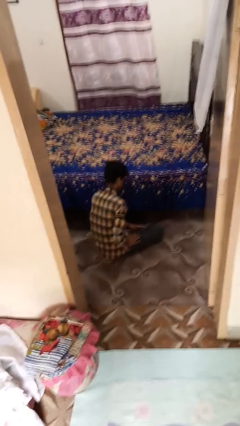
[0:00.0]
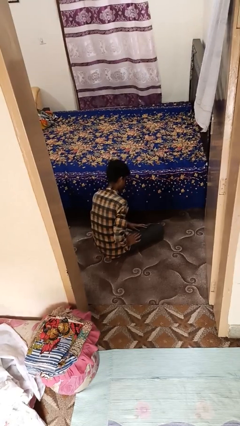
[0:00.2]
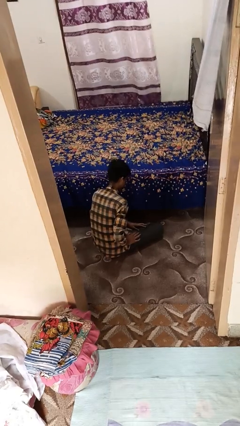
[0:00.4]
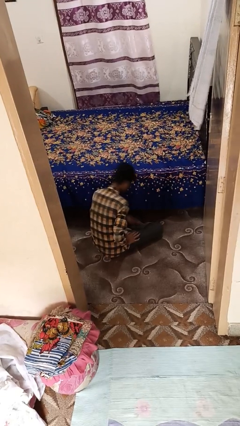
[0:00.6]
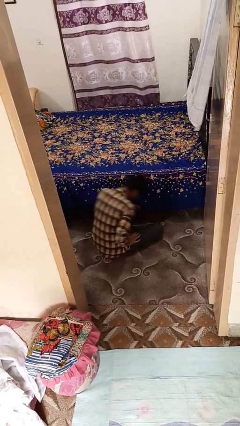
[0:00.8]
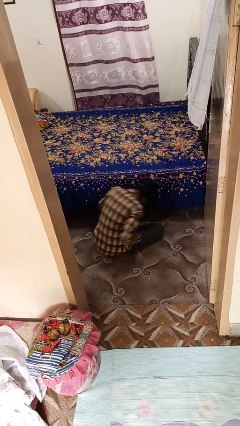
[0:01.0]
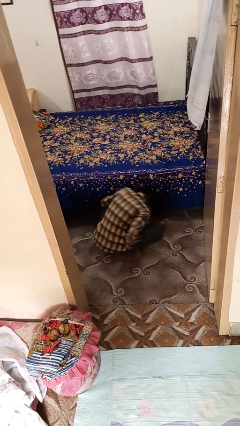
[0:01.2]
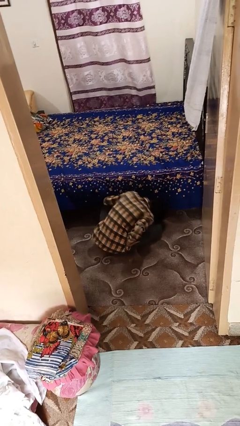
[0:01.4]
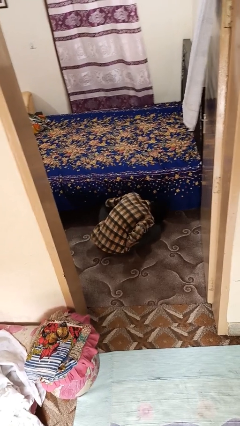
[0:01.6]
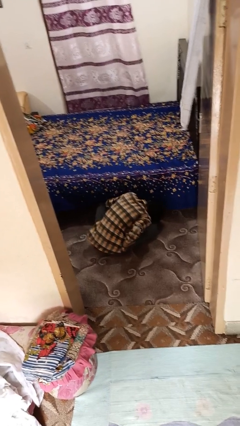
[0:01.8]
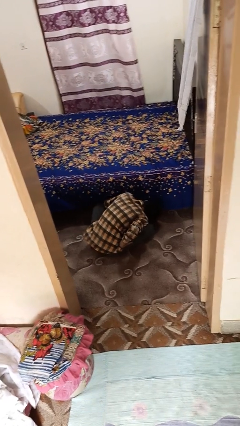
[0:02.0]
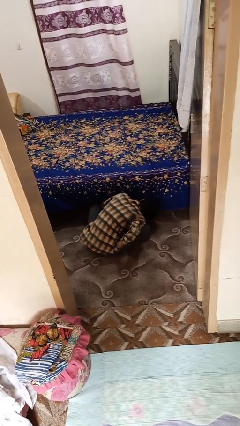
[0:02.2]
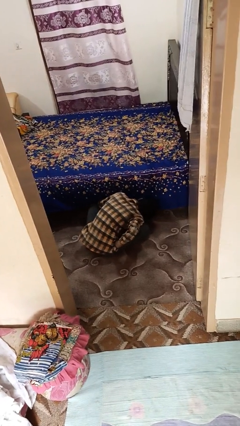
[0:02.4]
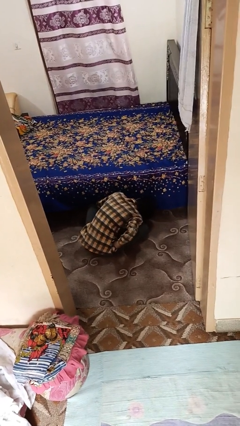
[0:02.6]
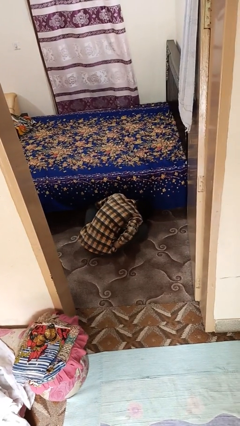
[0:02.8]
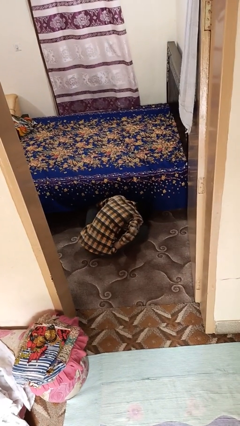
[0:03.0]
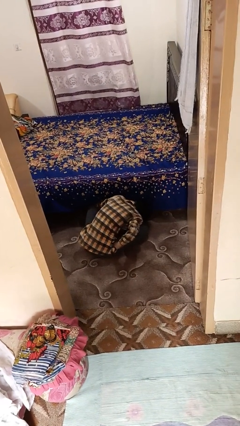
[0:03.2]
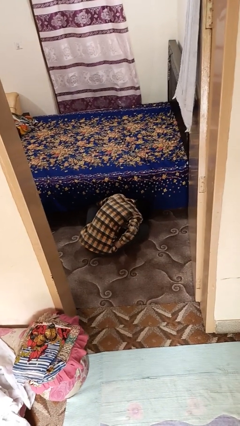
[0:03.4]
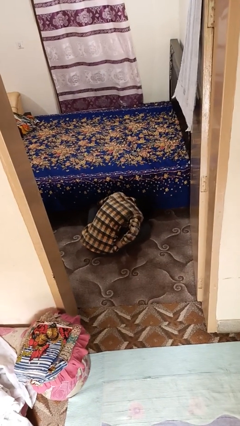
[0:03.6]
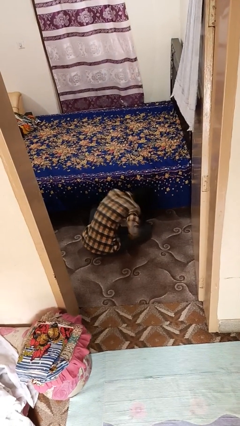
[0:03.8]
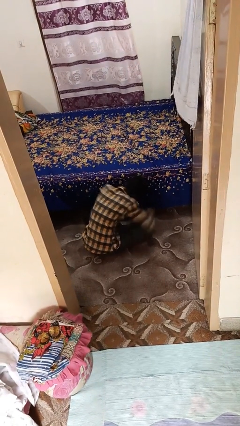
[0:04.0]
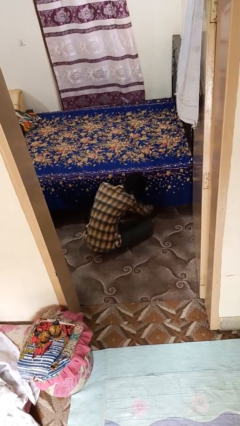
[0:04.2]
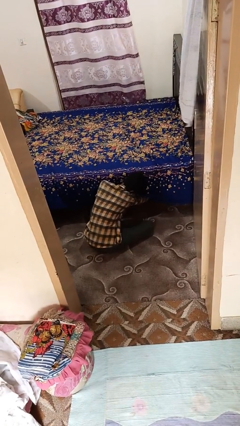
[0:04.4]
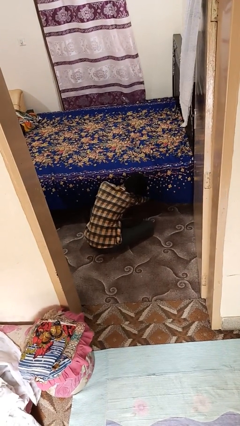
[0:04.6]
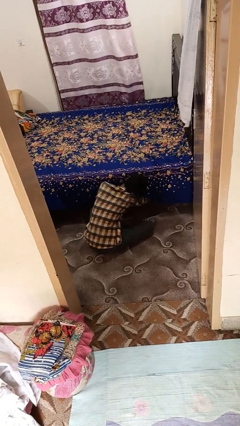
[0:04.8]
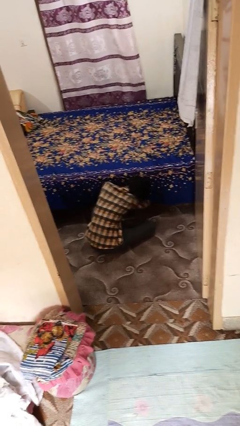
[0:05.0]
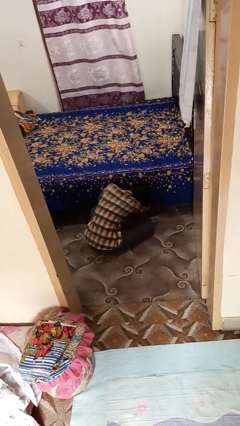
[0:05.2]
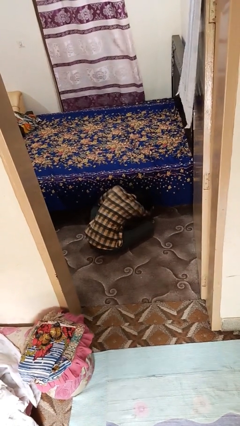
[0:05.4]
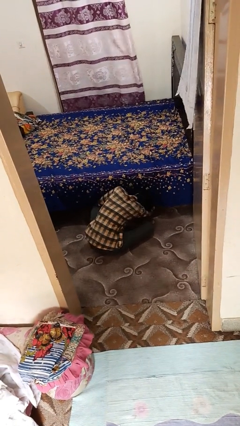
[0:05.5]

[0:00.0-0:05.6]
person searches under bed

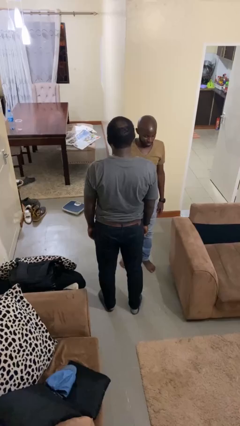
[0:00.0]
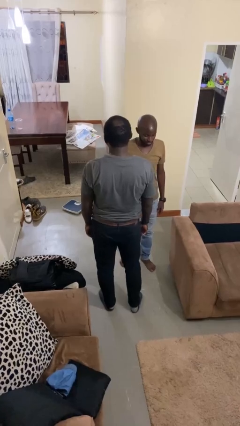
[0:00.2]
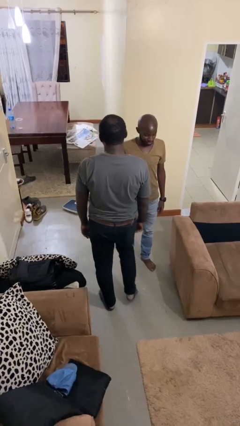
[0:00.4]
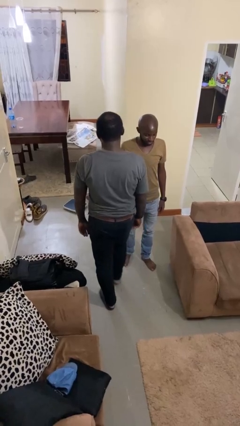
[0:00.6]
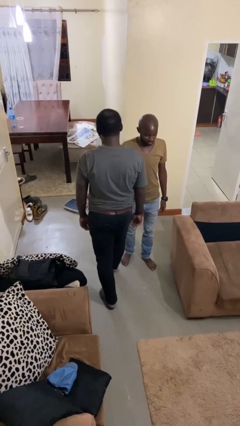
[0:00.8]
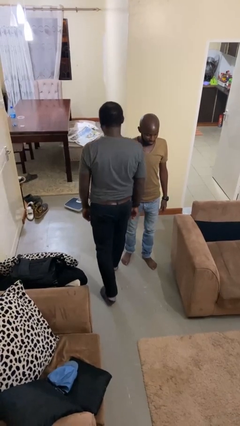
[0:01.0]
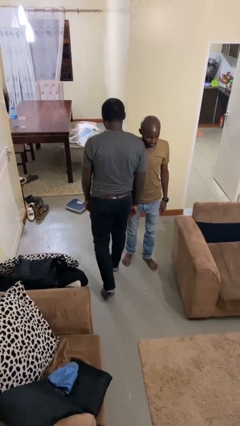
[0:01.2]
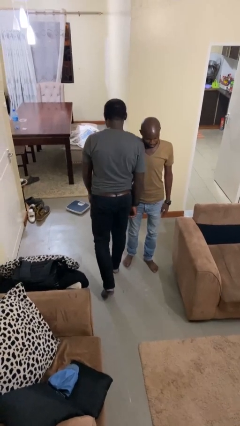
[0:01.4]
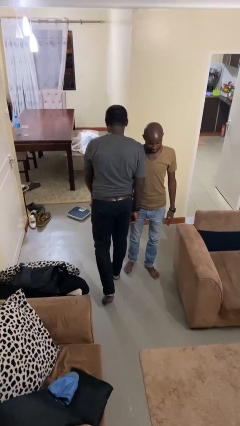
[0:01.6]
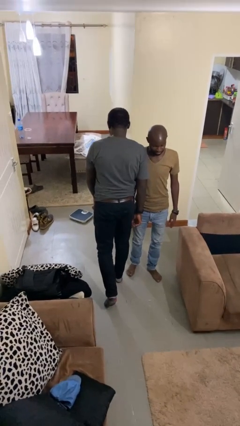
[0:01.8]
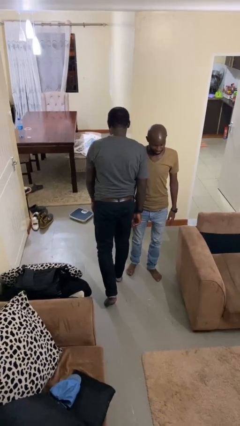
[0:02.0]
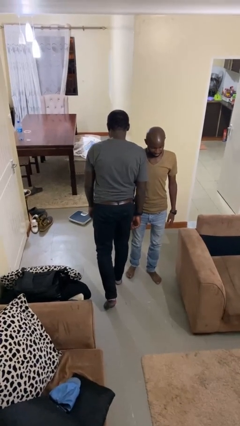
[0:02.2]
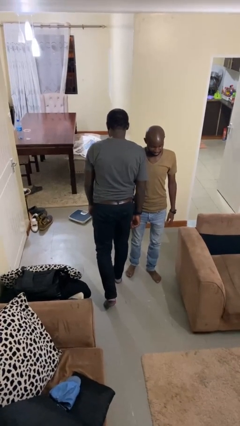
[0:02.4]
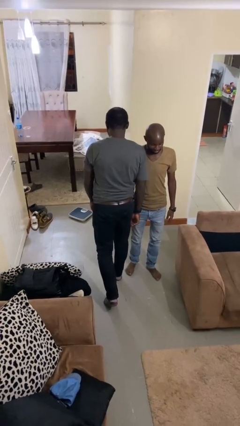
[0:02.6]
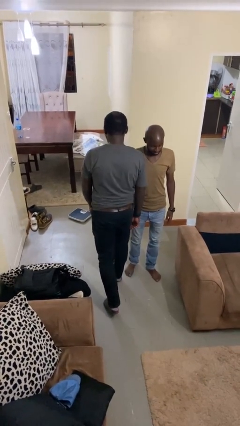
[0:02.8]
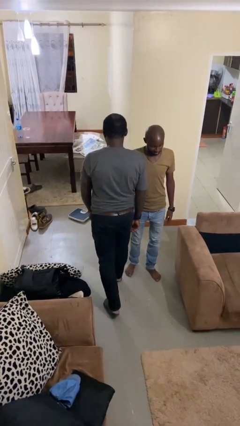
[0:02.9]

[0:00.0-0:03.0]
person bumps into person

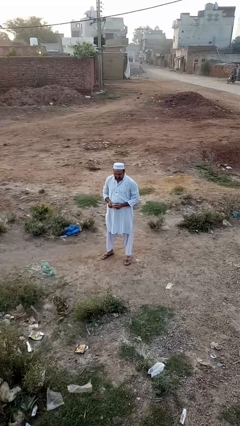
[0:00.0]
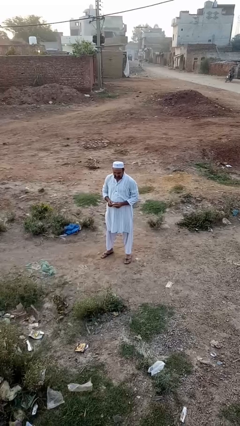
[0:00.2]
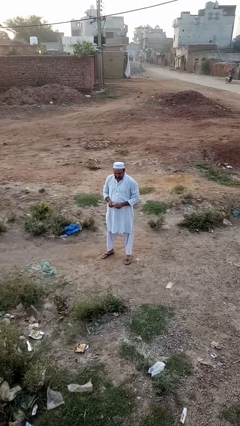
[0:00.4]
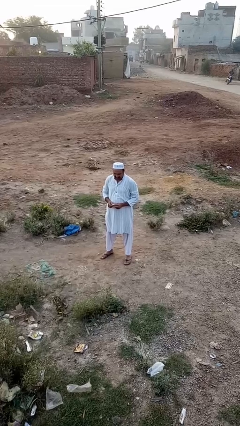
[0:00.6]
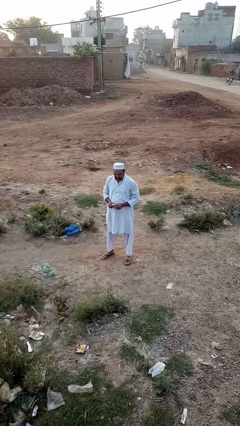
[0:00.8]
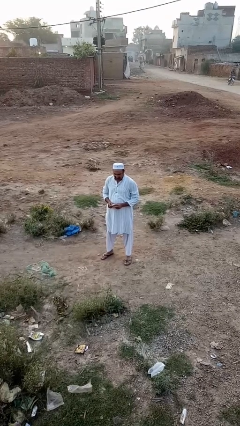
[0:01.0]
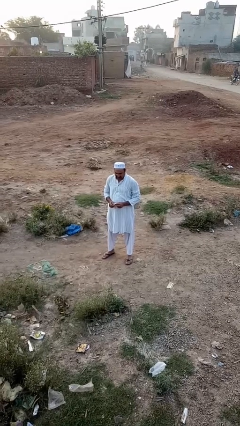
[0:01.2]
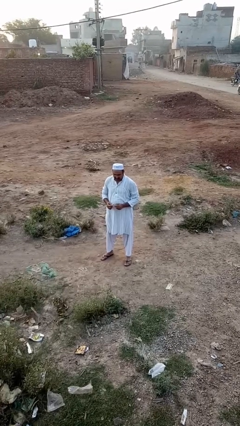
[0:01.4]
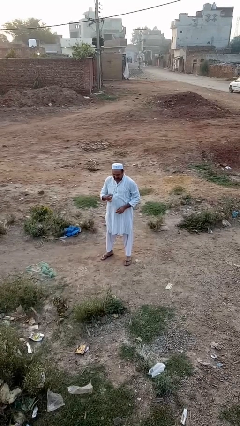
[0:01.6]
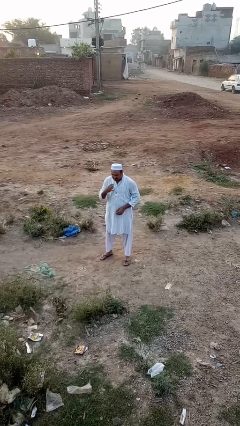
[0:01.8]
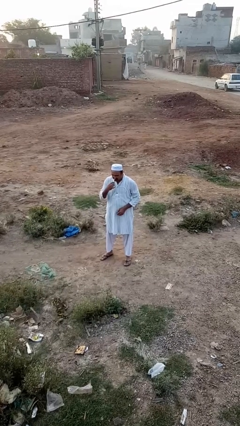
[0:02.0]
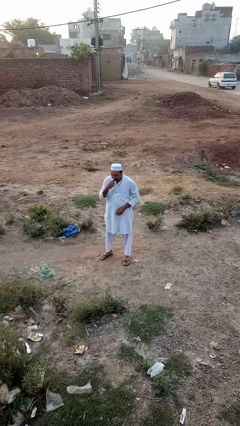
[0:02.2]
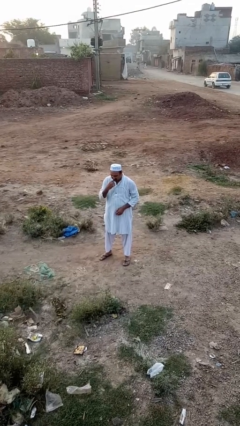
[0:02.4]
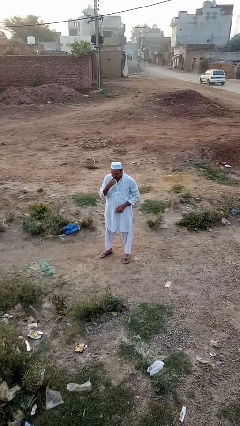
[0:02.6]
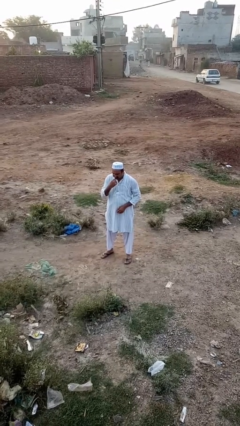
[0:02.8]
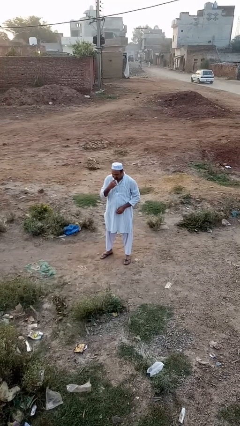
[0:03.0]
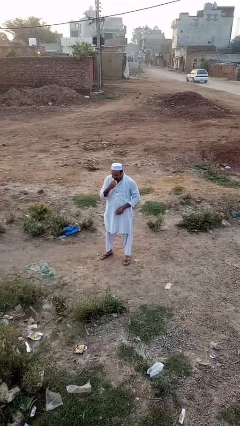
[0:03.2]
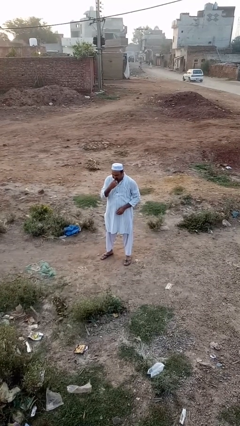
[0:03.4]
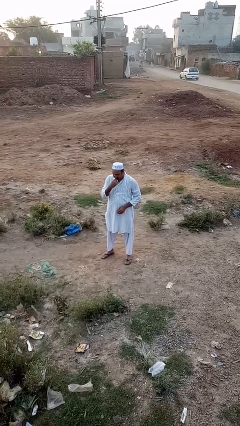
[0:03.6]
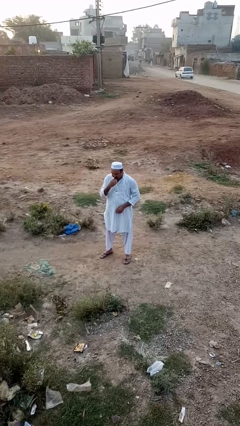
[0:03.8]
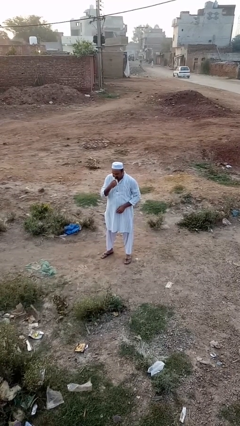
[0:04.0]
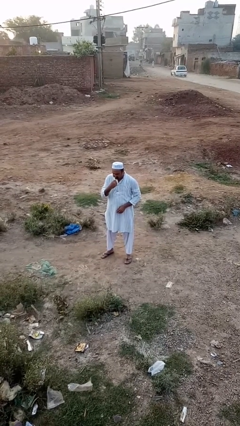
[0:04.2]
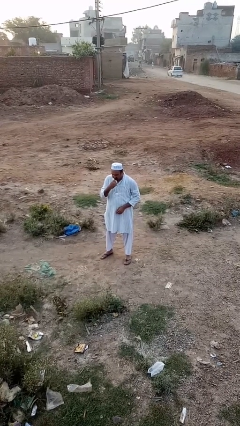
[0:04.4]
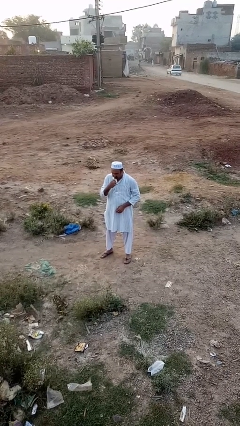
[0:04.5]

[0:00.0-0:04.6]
person brushes teeth

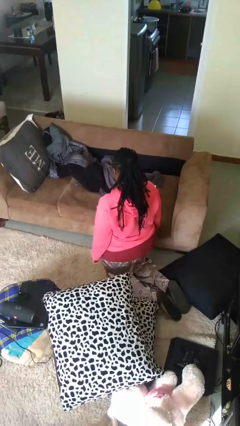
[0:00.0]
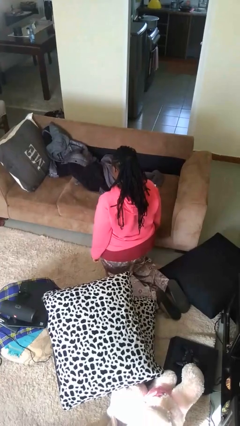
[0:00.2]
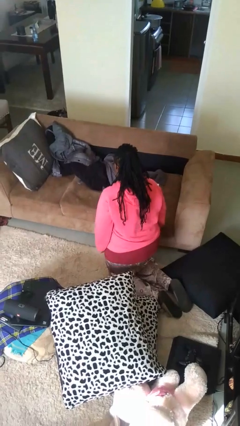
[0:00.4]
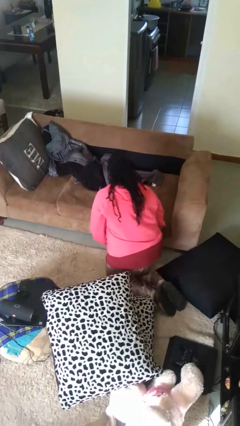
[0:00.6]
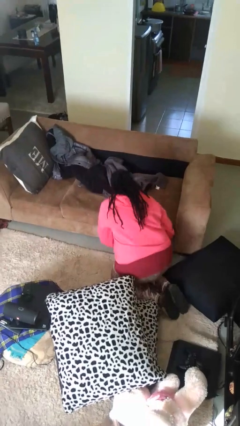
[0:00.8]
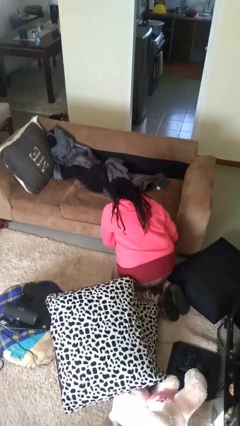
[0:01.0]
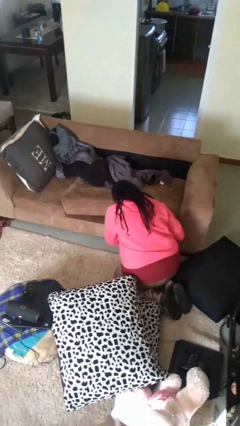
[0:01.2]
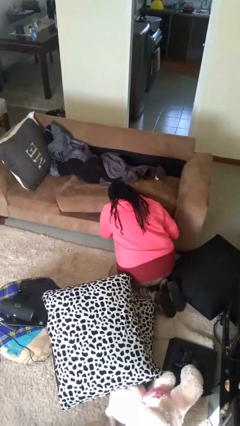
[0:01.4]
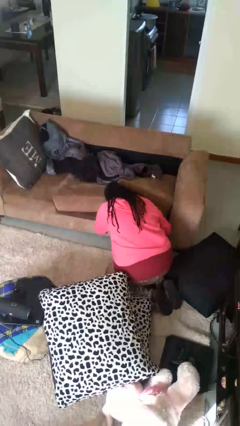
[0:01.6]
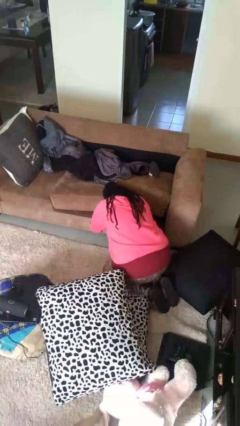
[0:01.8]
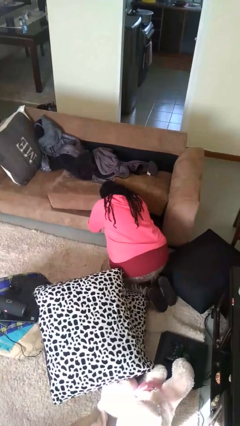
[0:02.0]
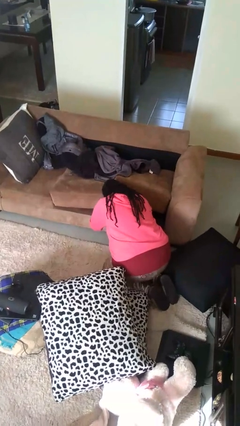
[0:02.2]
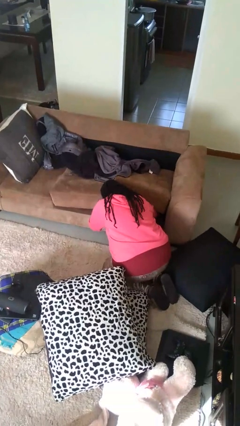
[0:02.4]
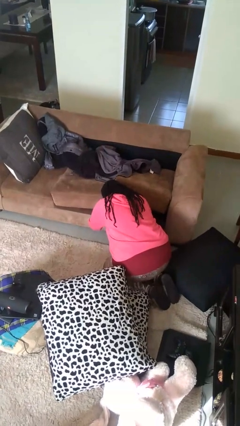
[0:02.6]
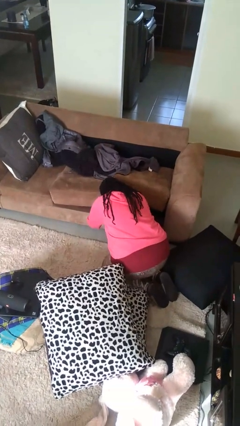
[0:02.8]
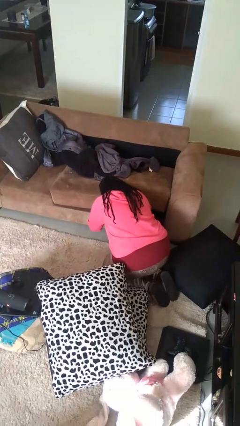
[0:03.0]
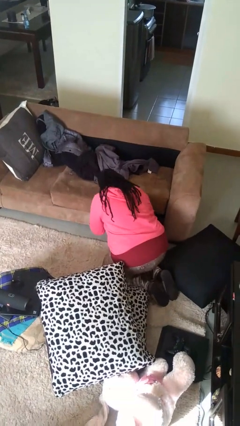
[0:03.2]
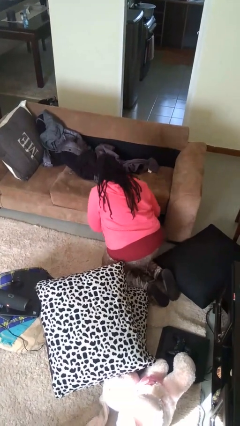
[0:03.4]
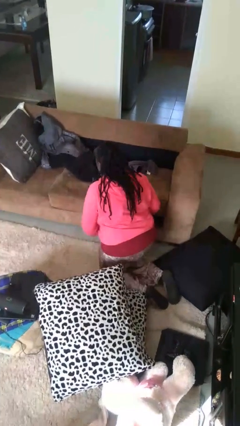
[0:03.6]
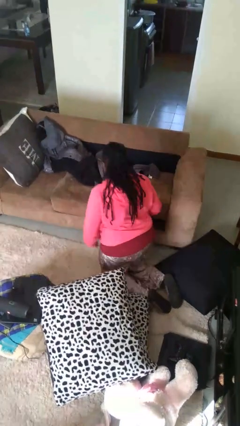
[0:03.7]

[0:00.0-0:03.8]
person searches under couch

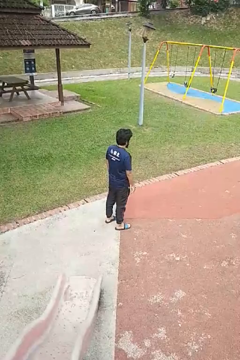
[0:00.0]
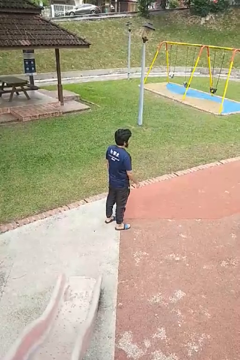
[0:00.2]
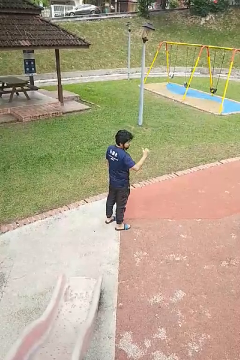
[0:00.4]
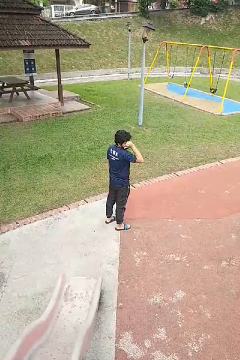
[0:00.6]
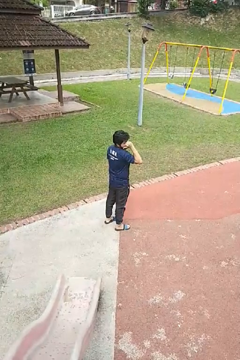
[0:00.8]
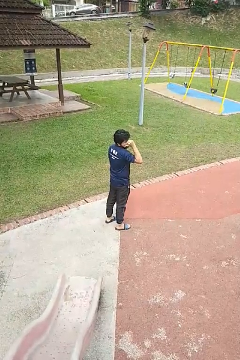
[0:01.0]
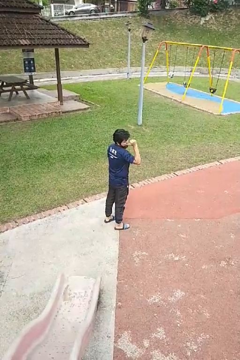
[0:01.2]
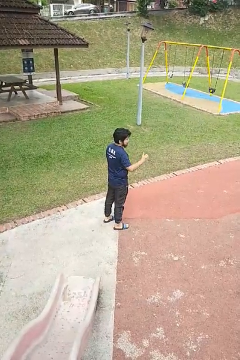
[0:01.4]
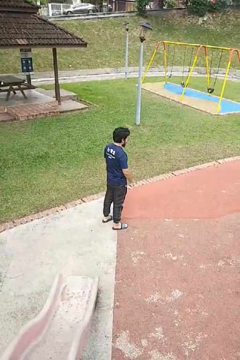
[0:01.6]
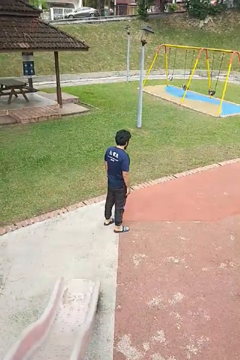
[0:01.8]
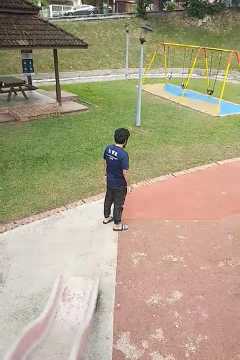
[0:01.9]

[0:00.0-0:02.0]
person gestures behind me
